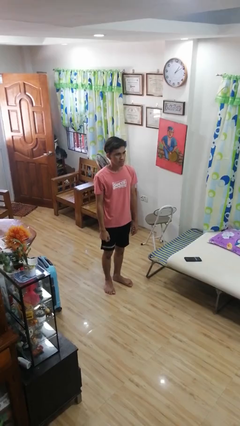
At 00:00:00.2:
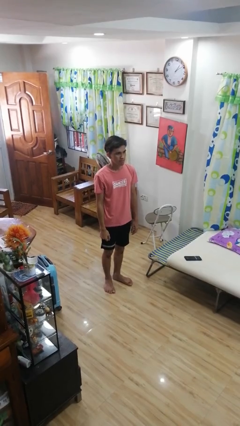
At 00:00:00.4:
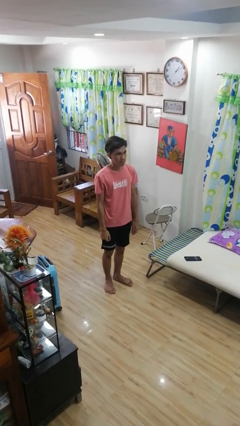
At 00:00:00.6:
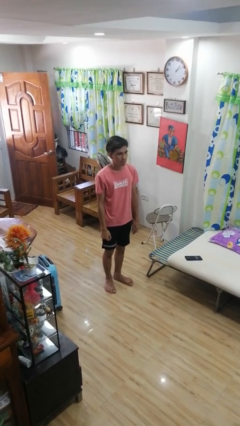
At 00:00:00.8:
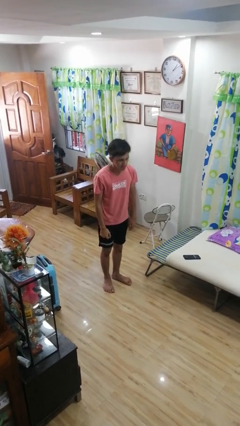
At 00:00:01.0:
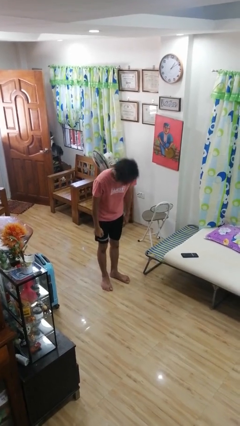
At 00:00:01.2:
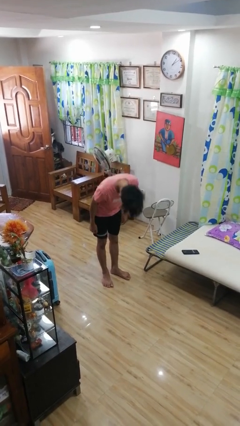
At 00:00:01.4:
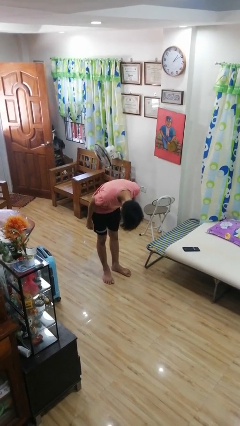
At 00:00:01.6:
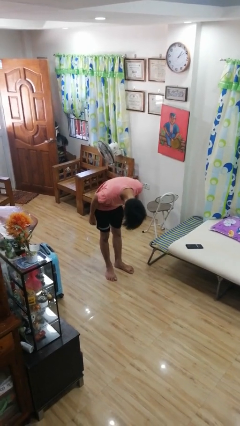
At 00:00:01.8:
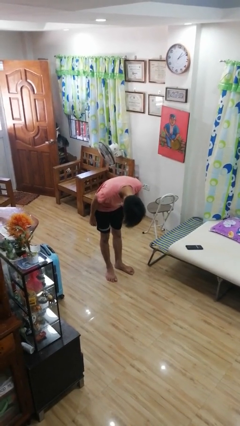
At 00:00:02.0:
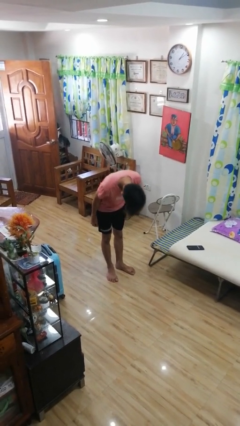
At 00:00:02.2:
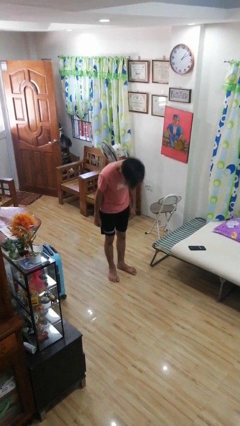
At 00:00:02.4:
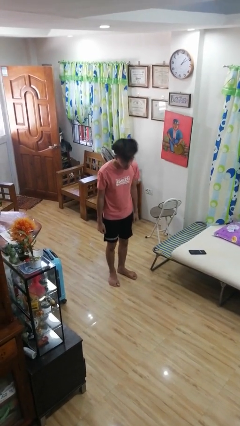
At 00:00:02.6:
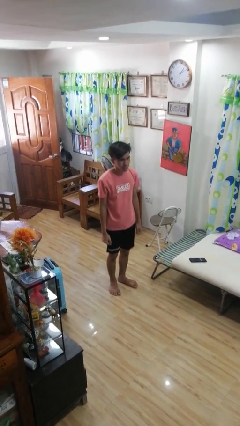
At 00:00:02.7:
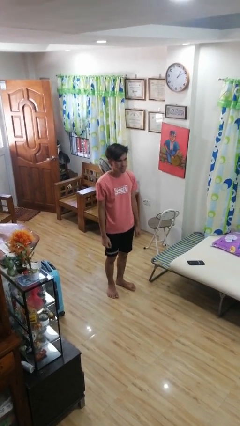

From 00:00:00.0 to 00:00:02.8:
person bows

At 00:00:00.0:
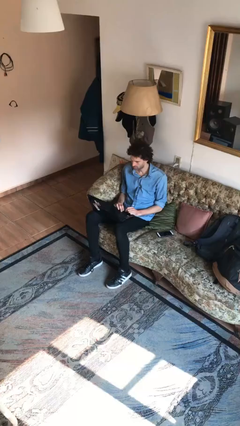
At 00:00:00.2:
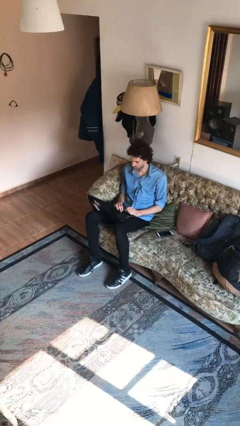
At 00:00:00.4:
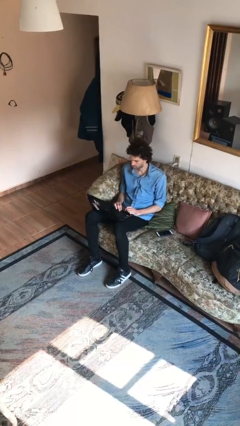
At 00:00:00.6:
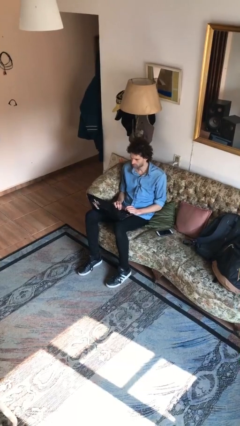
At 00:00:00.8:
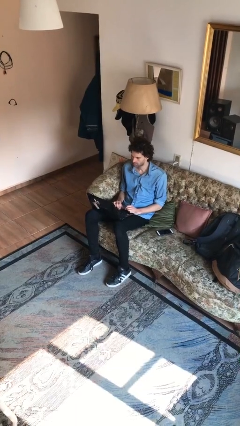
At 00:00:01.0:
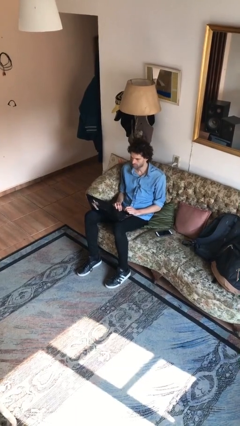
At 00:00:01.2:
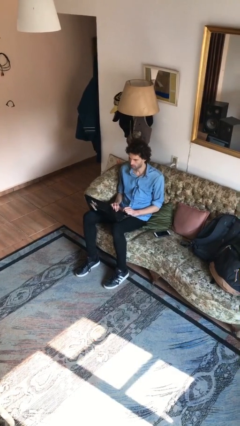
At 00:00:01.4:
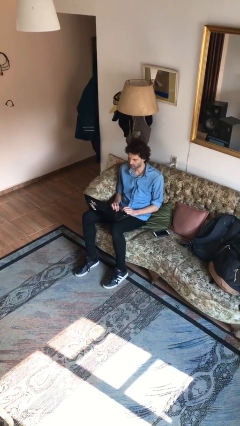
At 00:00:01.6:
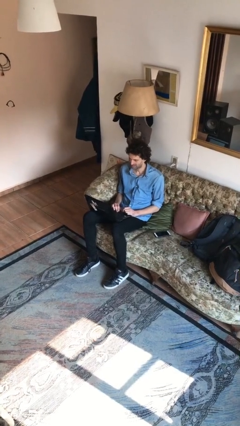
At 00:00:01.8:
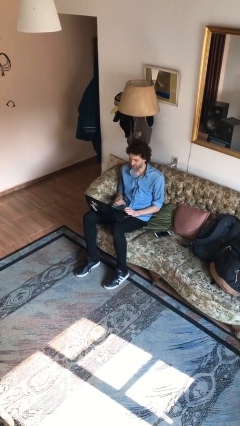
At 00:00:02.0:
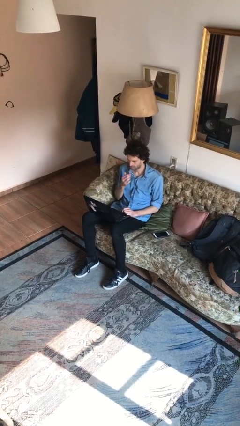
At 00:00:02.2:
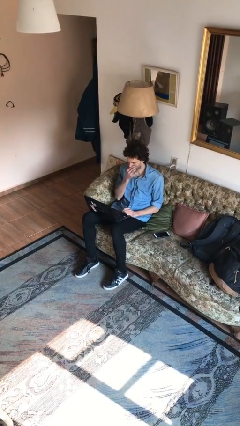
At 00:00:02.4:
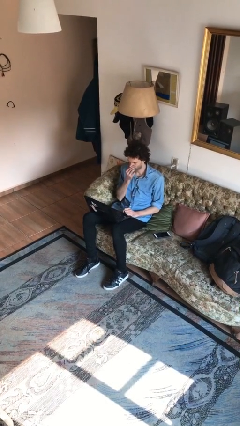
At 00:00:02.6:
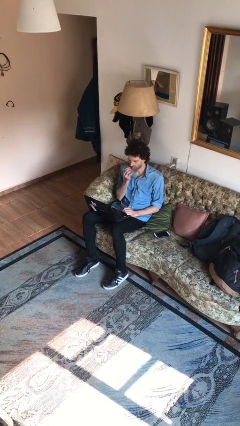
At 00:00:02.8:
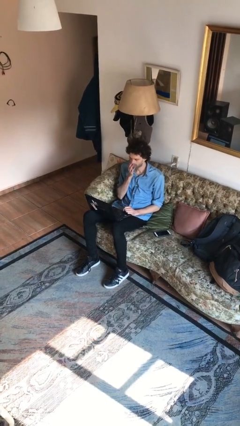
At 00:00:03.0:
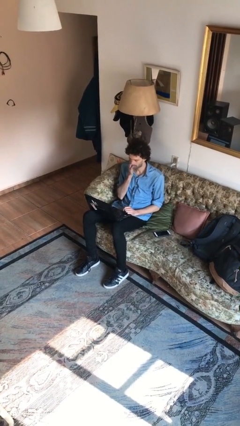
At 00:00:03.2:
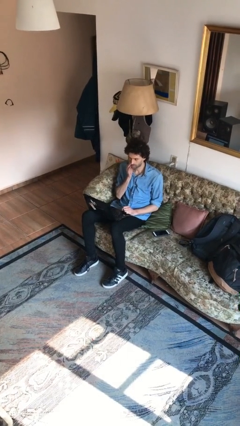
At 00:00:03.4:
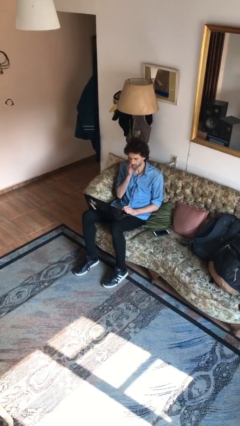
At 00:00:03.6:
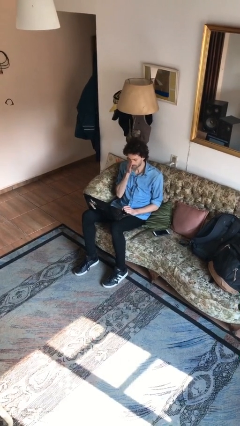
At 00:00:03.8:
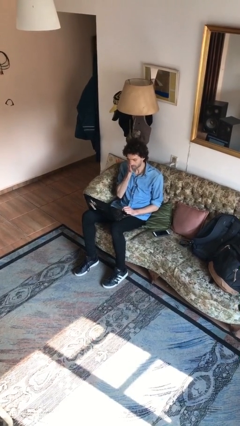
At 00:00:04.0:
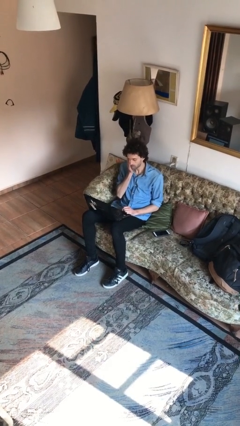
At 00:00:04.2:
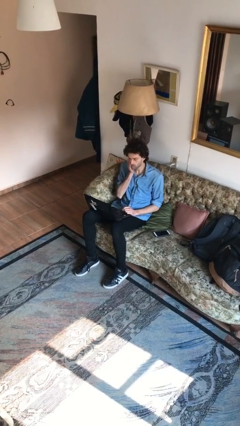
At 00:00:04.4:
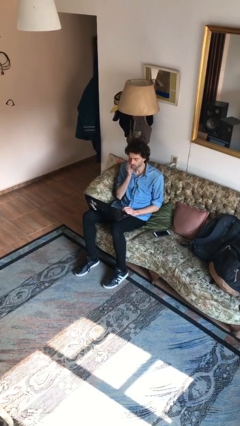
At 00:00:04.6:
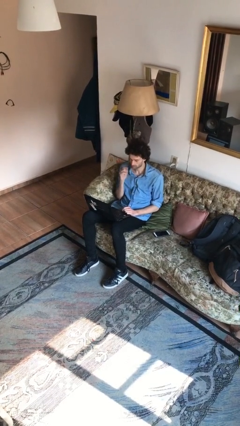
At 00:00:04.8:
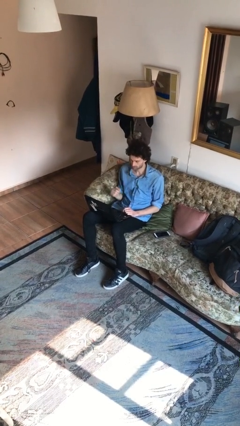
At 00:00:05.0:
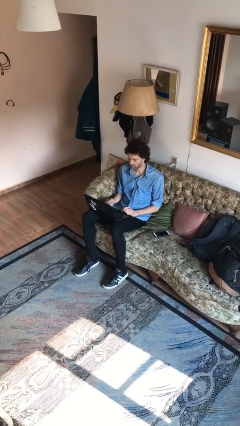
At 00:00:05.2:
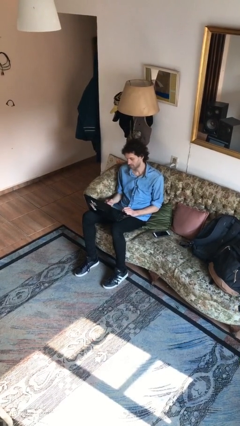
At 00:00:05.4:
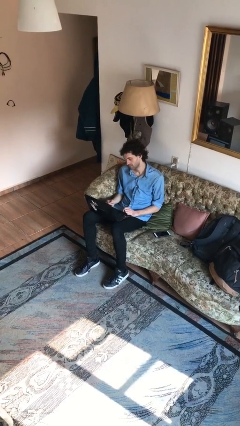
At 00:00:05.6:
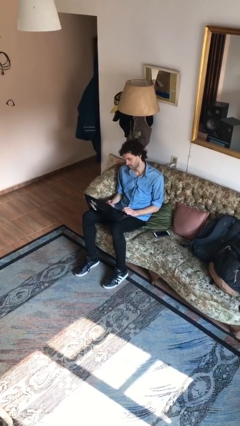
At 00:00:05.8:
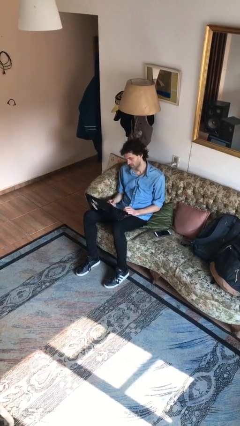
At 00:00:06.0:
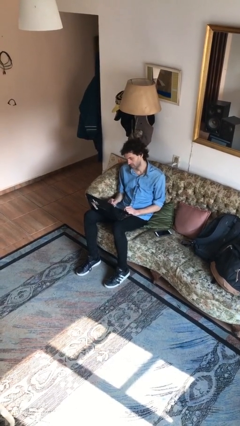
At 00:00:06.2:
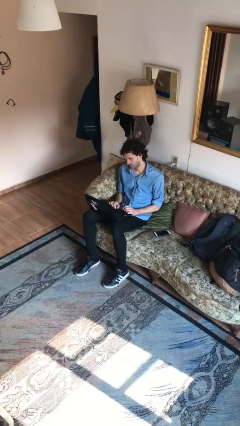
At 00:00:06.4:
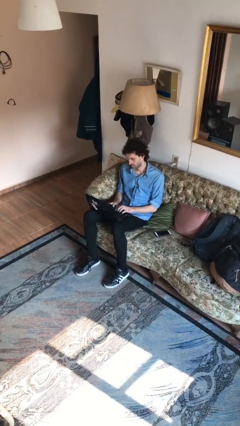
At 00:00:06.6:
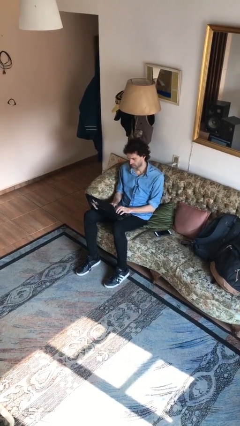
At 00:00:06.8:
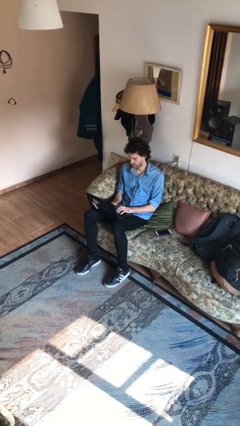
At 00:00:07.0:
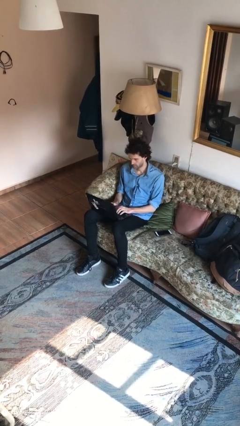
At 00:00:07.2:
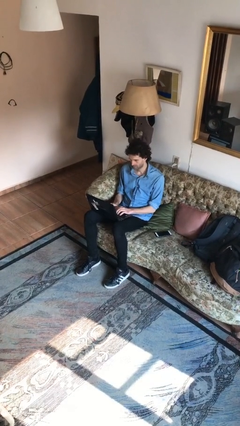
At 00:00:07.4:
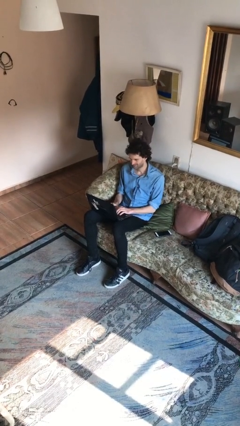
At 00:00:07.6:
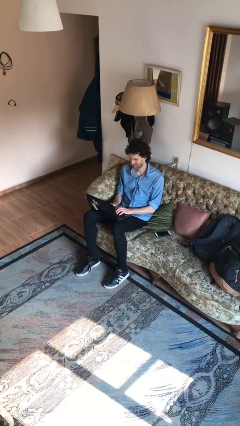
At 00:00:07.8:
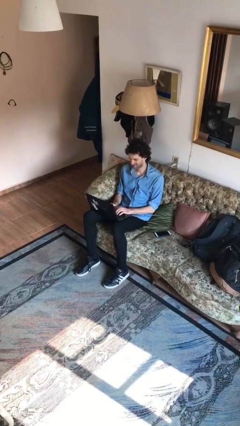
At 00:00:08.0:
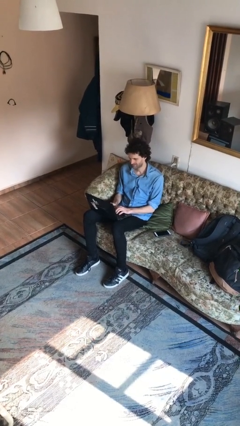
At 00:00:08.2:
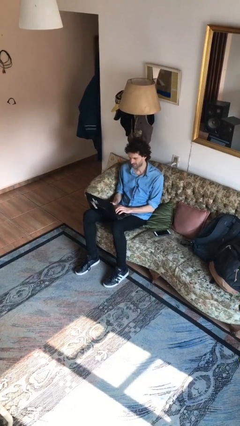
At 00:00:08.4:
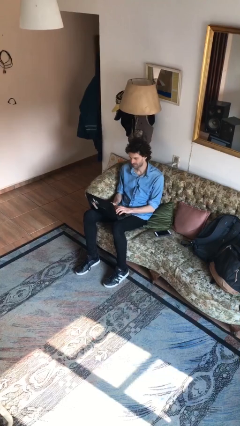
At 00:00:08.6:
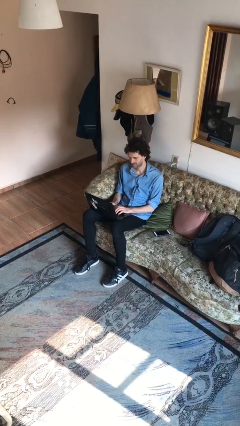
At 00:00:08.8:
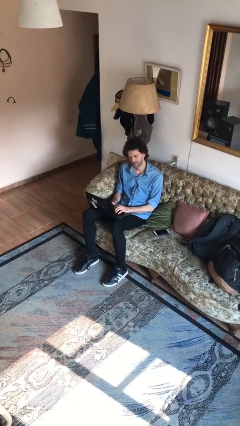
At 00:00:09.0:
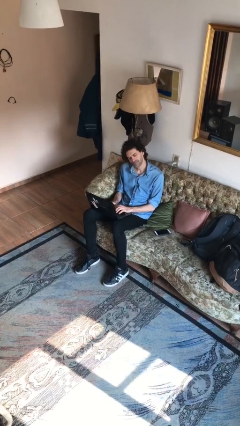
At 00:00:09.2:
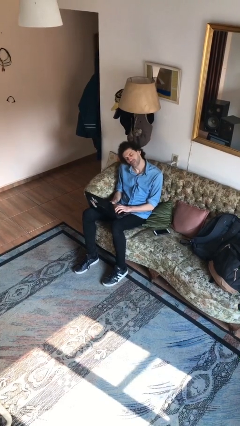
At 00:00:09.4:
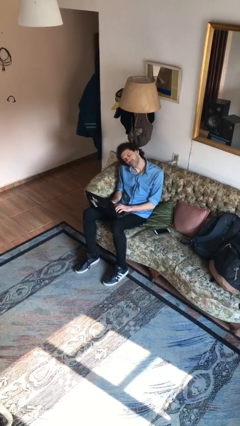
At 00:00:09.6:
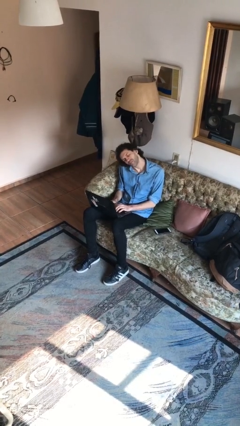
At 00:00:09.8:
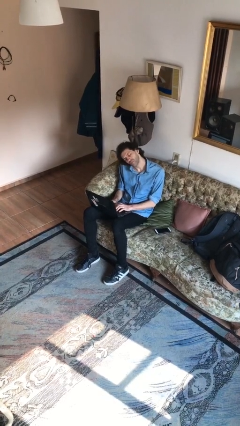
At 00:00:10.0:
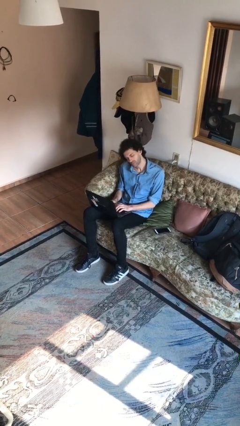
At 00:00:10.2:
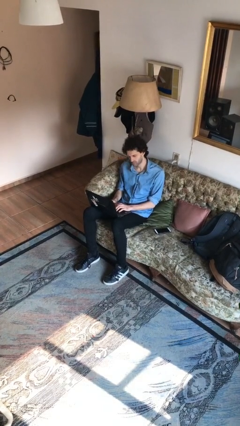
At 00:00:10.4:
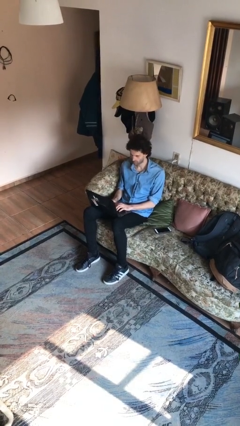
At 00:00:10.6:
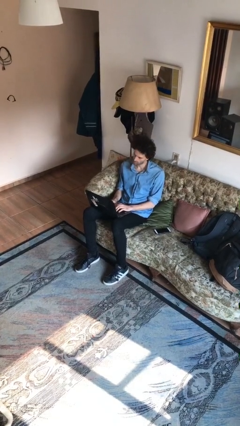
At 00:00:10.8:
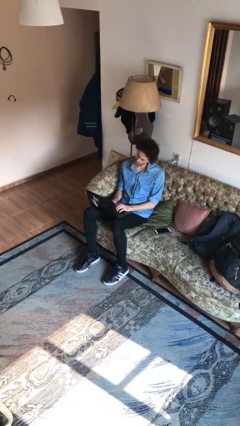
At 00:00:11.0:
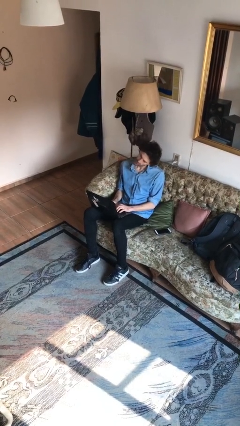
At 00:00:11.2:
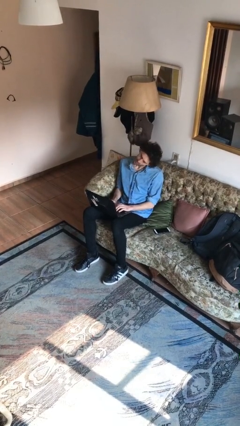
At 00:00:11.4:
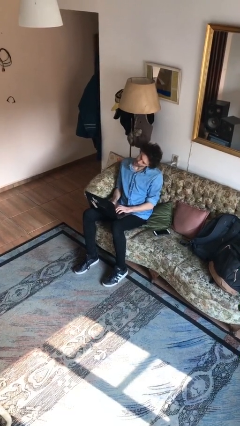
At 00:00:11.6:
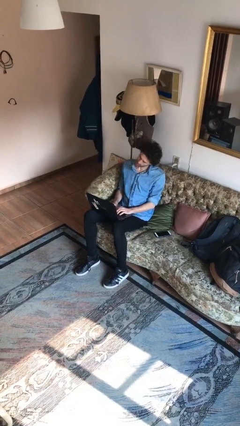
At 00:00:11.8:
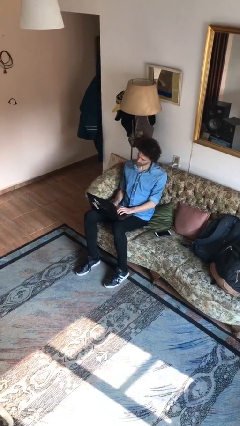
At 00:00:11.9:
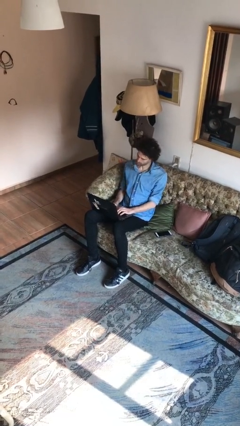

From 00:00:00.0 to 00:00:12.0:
person interacts with laptop

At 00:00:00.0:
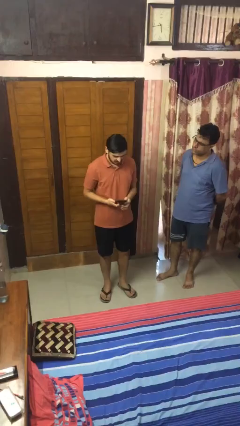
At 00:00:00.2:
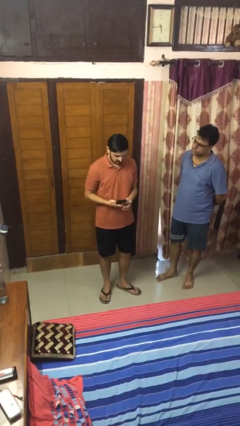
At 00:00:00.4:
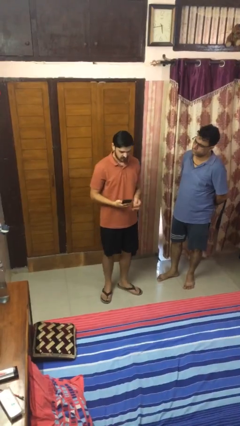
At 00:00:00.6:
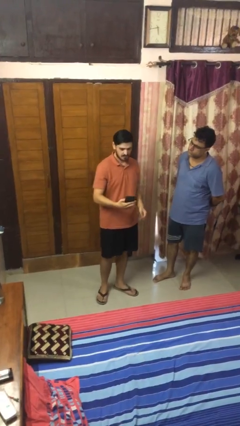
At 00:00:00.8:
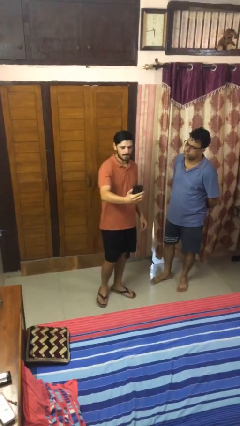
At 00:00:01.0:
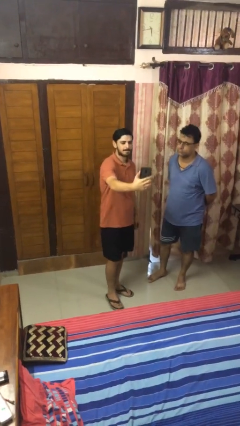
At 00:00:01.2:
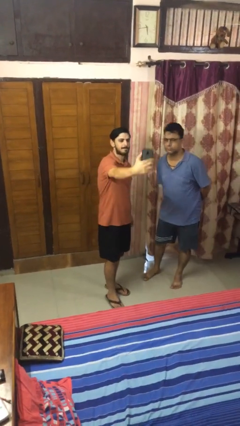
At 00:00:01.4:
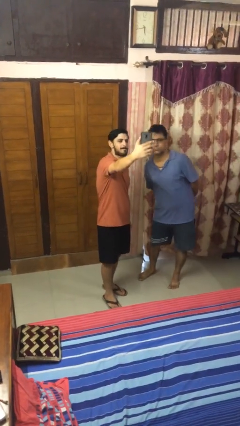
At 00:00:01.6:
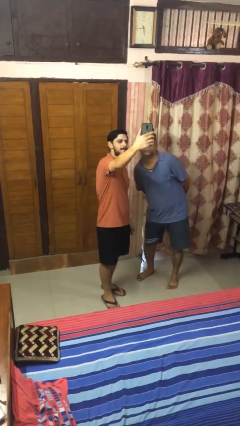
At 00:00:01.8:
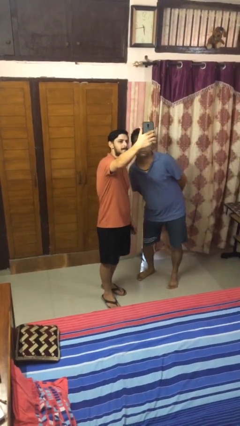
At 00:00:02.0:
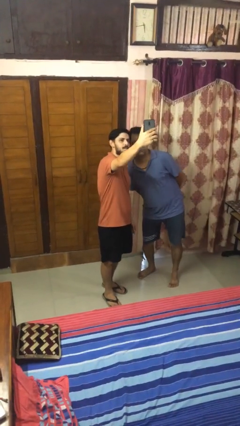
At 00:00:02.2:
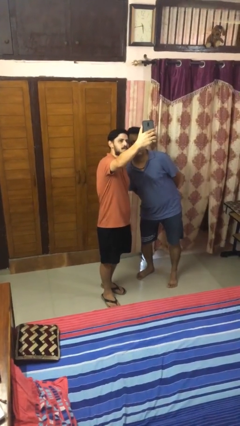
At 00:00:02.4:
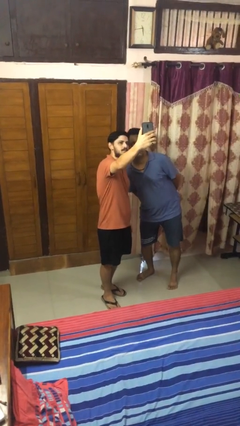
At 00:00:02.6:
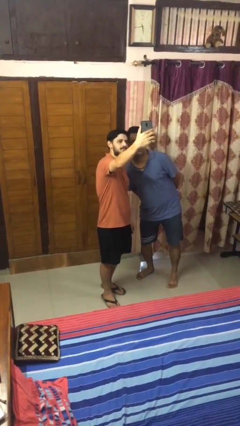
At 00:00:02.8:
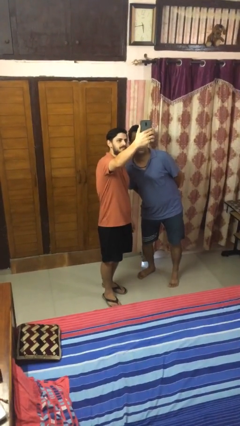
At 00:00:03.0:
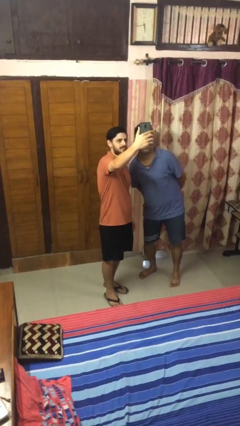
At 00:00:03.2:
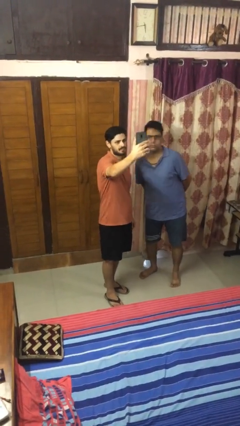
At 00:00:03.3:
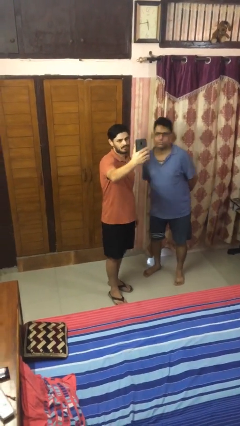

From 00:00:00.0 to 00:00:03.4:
person takes selfie with person
